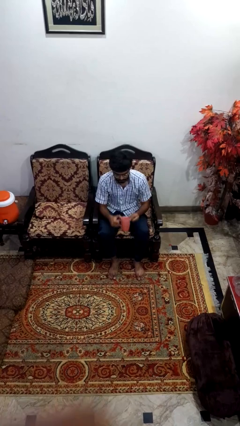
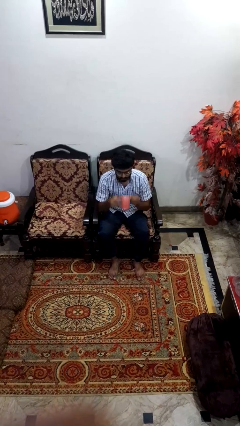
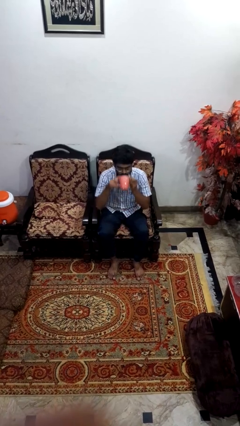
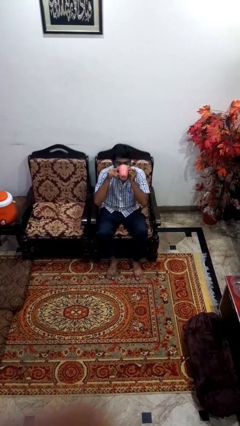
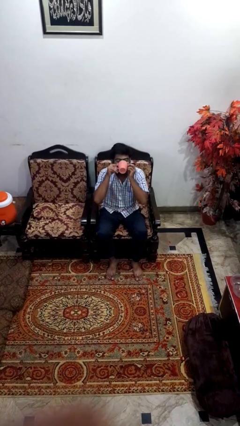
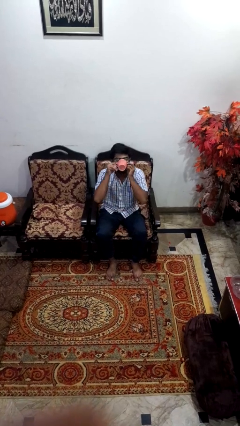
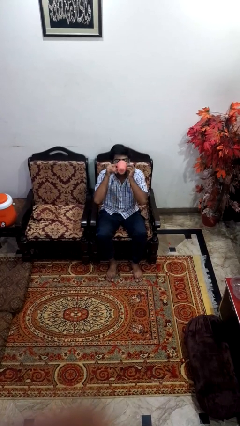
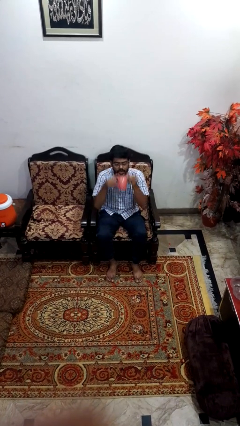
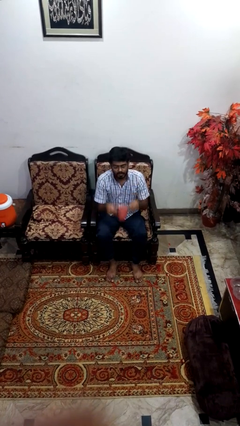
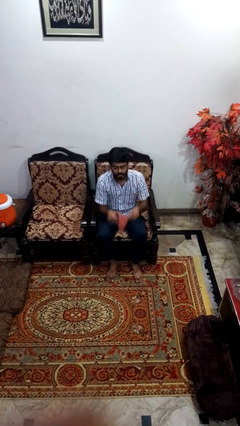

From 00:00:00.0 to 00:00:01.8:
person drinks from mug

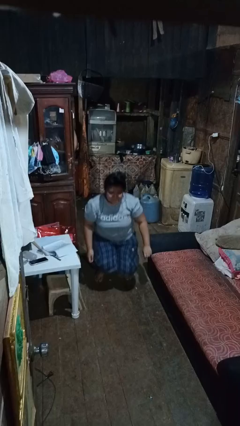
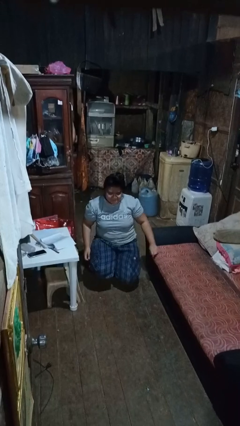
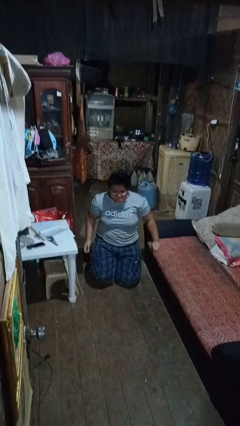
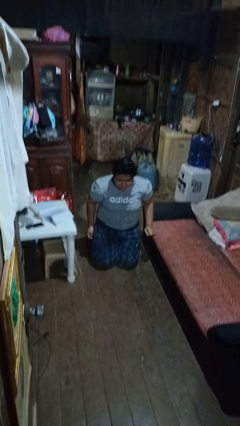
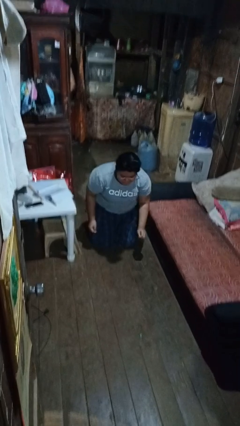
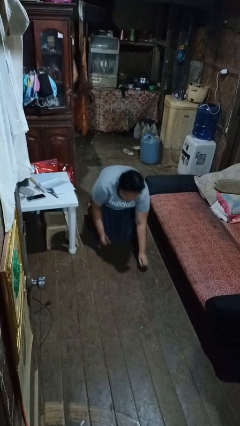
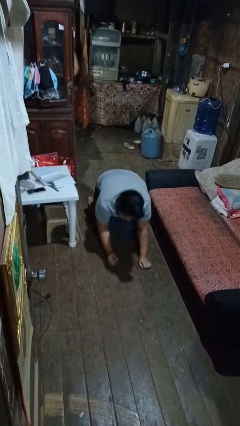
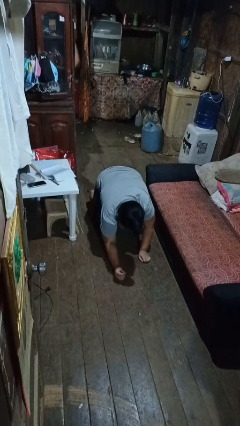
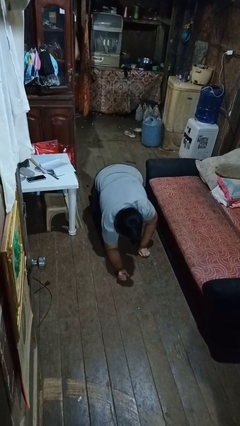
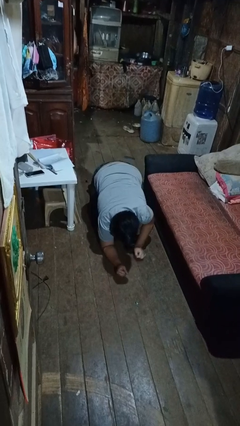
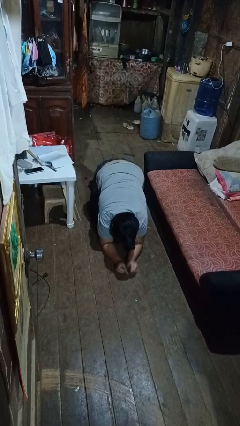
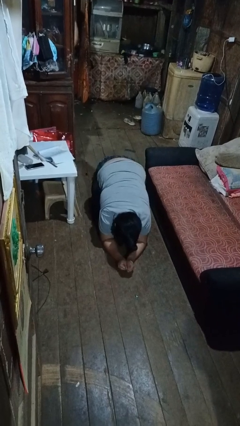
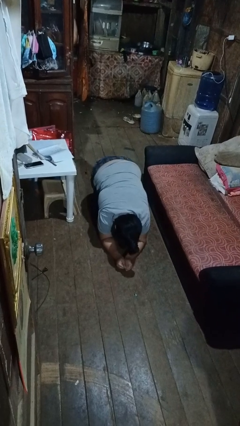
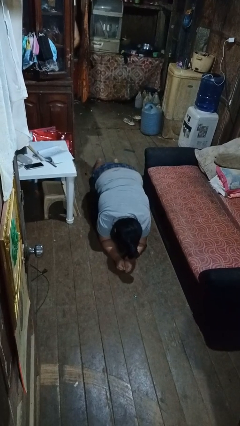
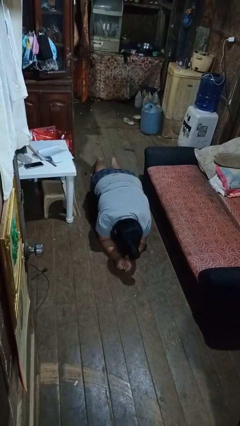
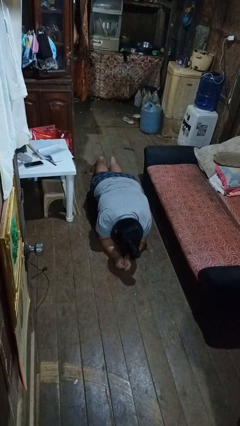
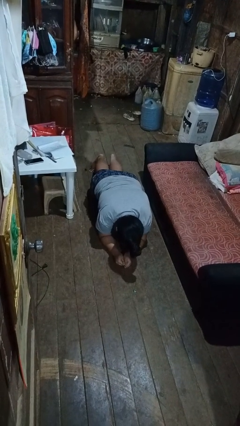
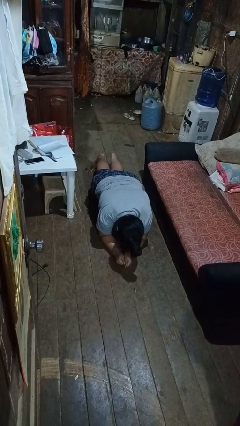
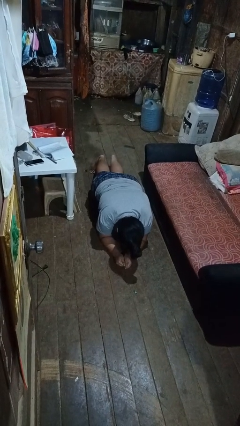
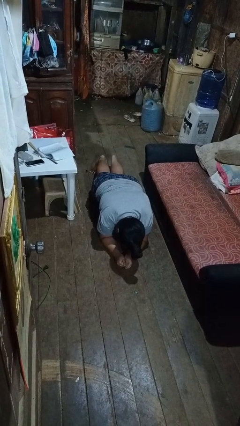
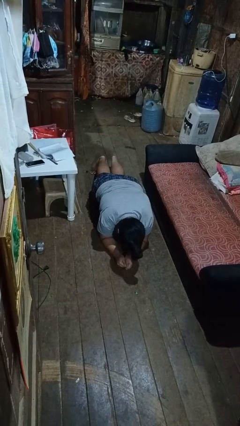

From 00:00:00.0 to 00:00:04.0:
person exercises with plank

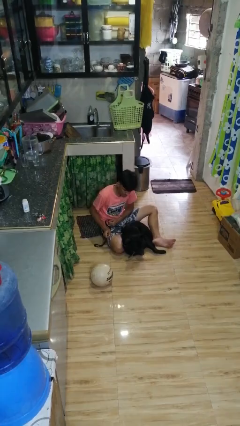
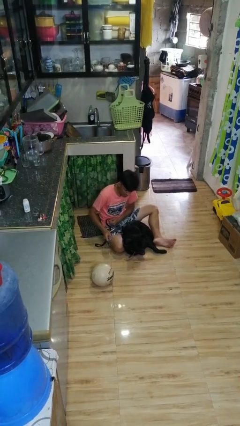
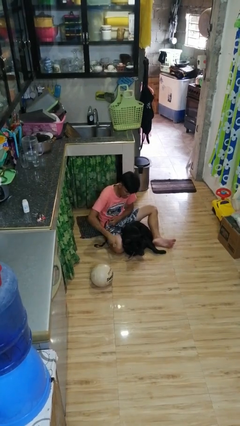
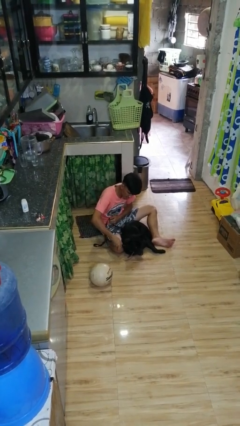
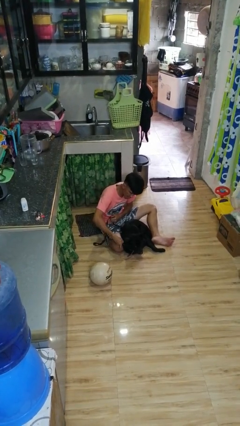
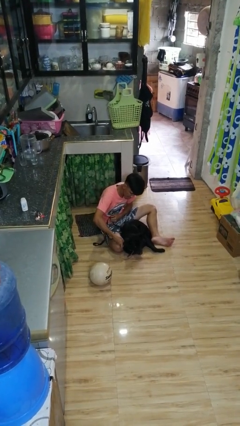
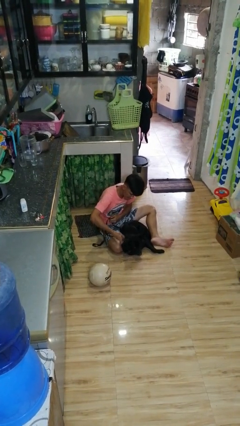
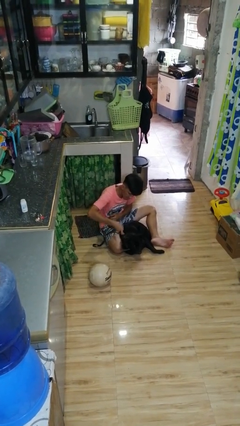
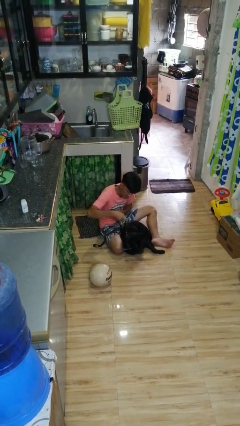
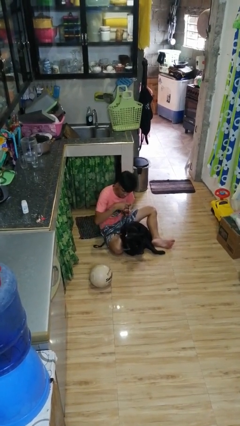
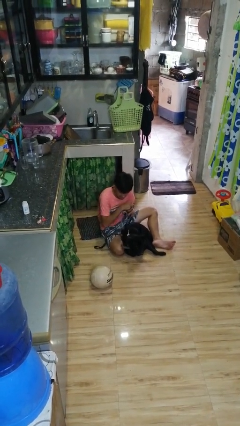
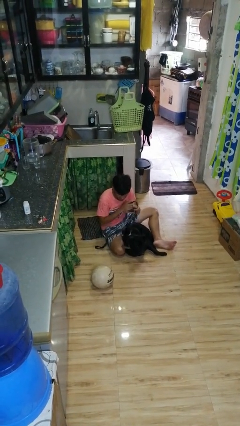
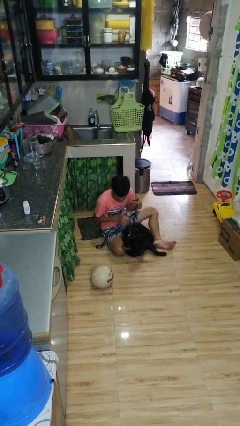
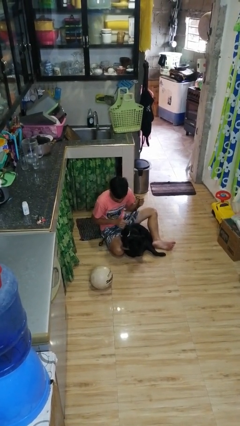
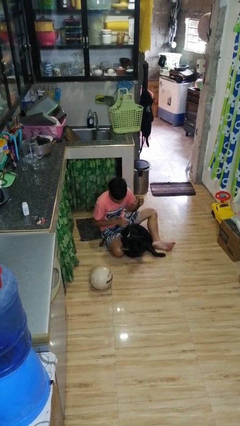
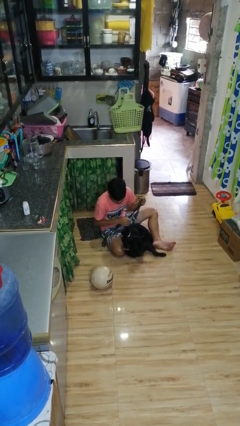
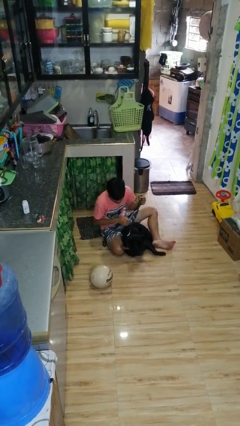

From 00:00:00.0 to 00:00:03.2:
person attaches leash to dog

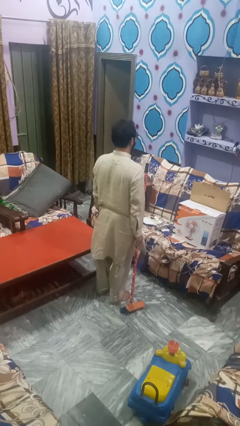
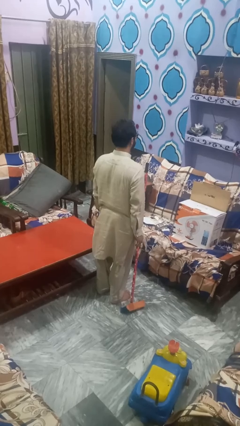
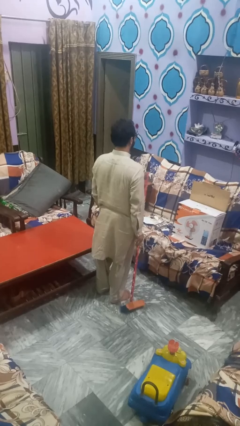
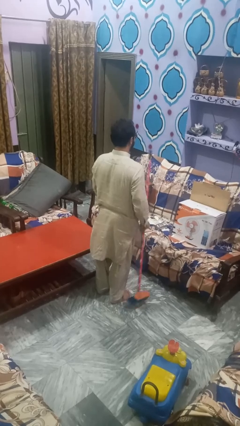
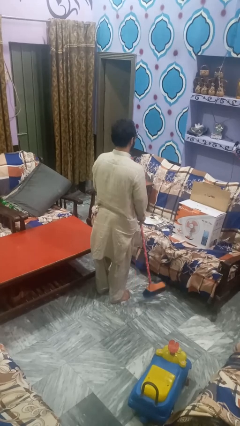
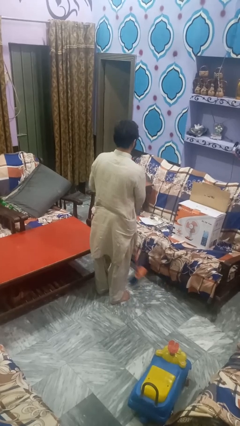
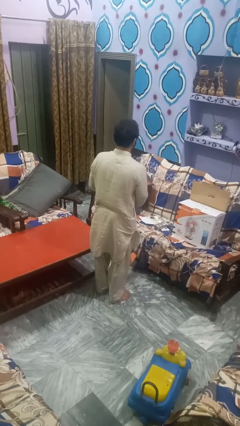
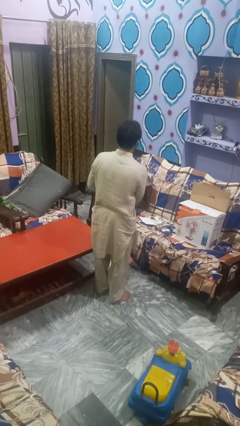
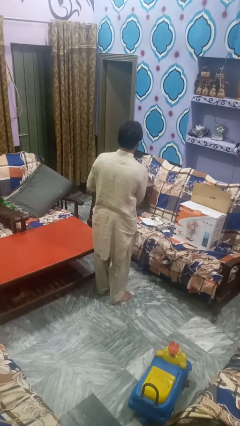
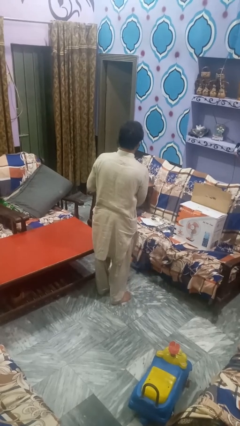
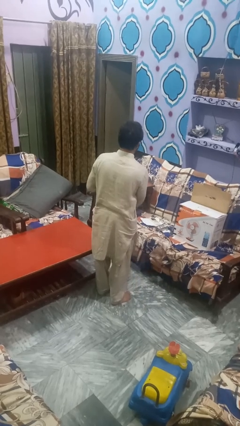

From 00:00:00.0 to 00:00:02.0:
person mops

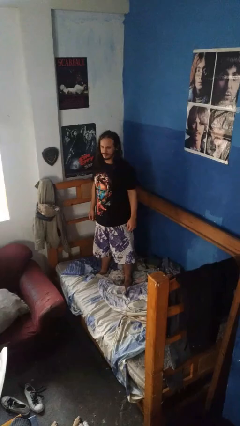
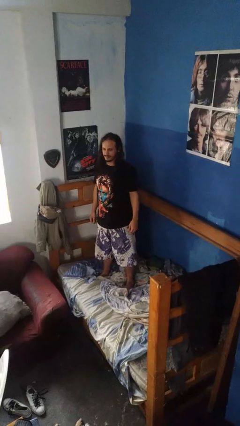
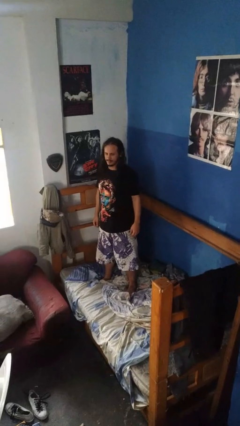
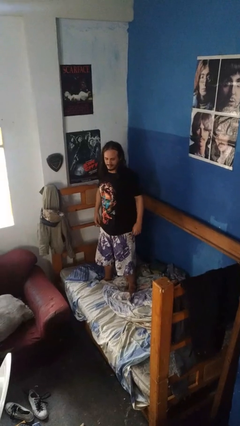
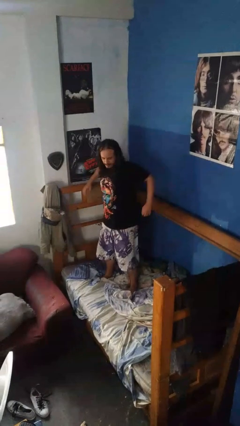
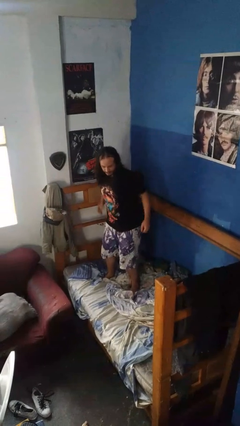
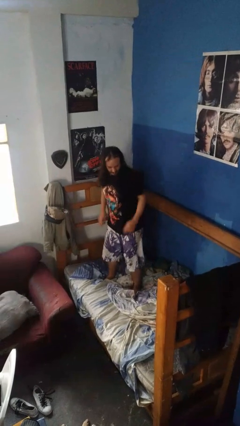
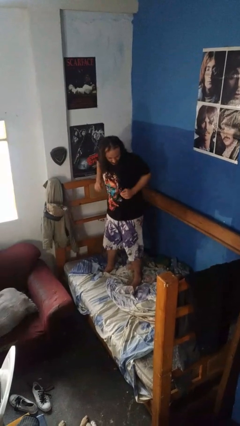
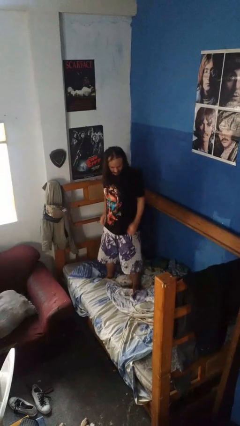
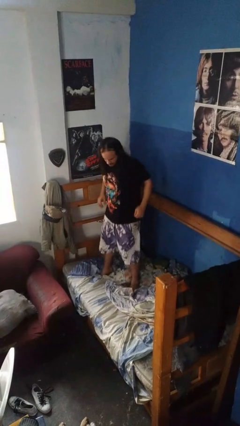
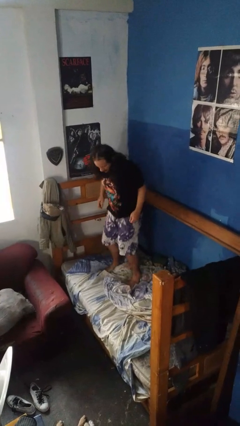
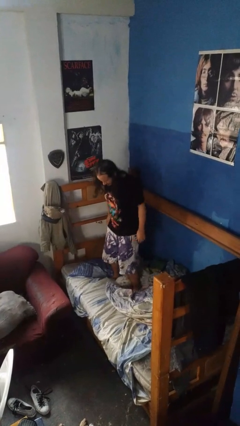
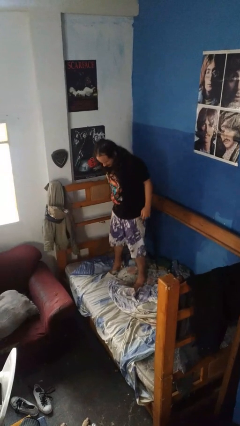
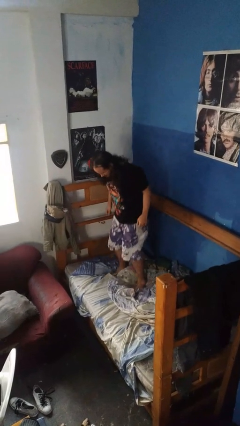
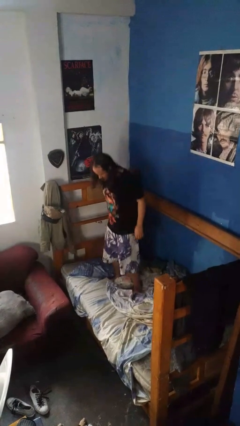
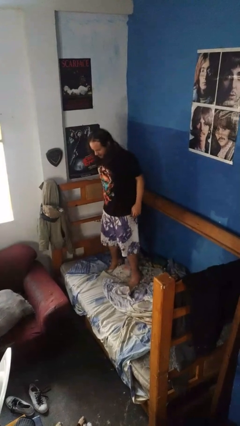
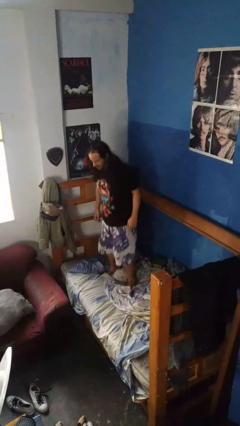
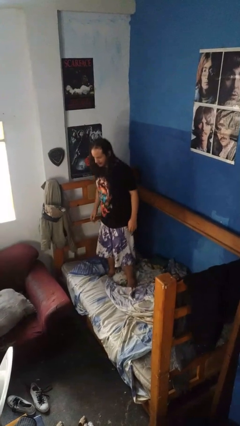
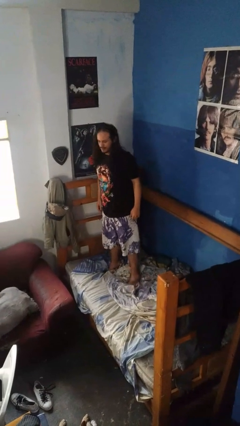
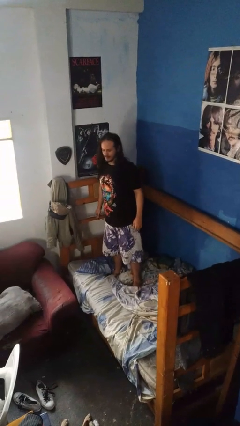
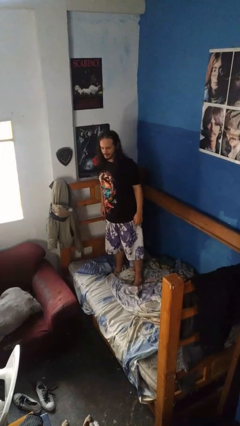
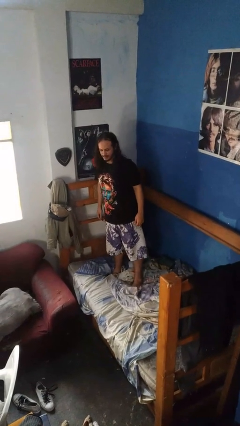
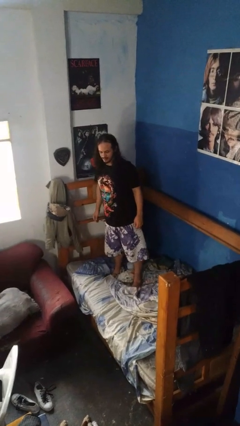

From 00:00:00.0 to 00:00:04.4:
person jumps on bed

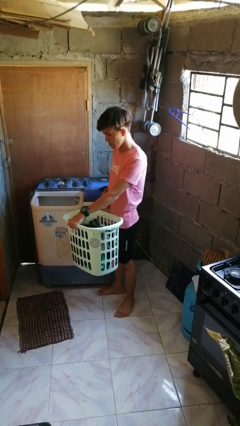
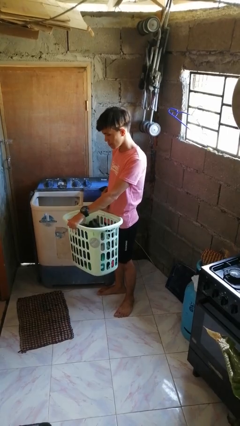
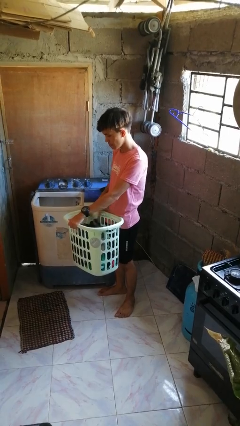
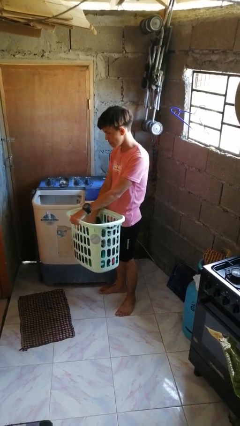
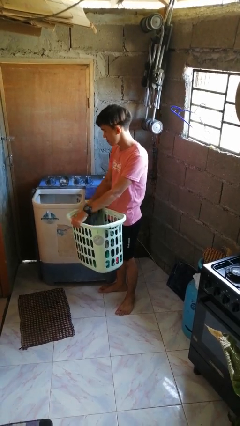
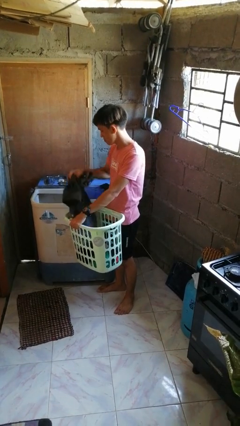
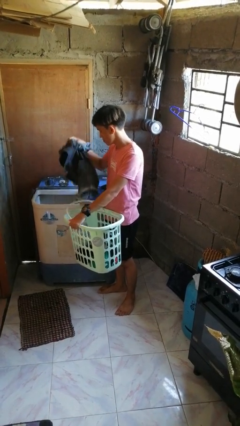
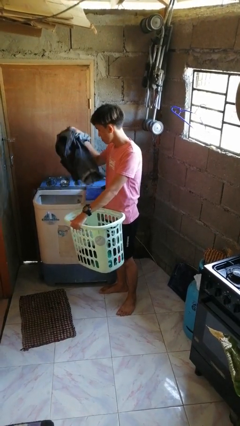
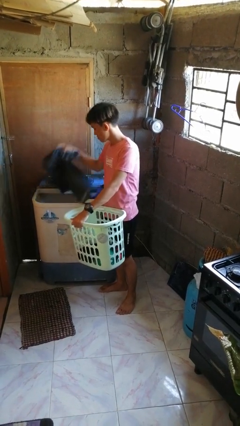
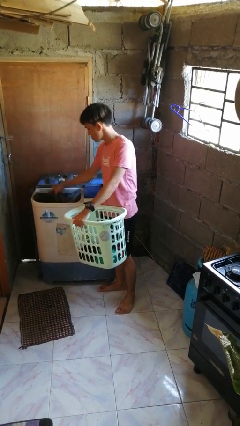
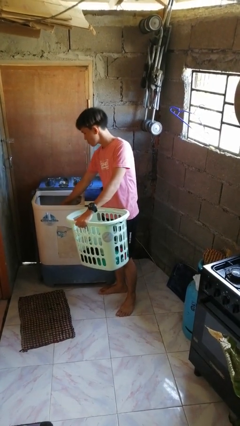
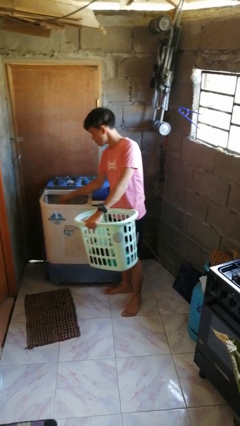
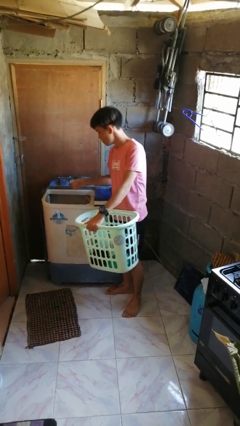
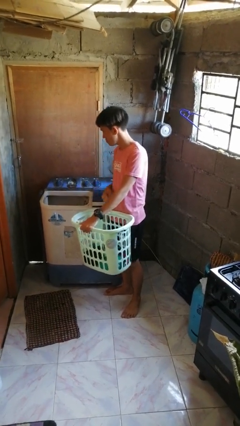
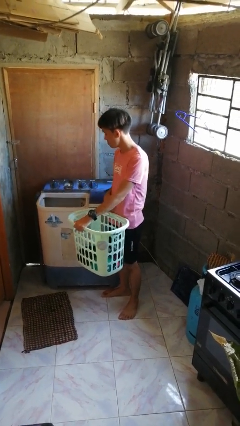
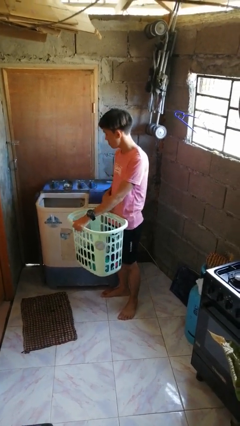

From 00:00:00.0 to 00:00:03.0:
person loads clotheswasher
